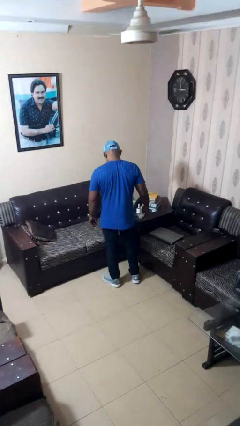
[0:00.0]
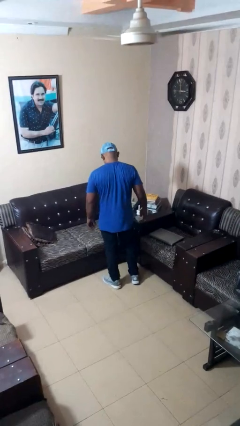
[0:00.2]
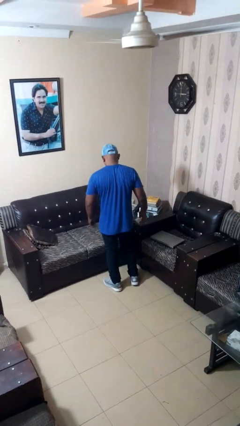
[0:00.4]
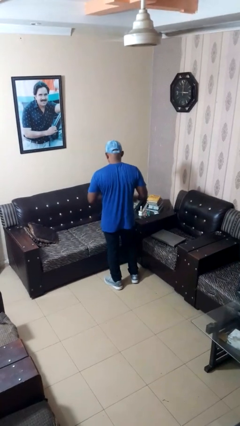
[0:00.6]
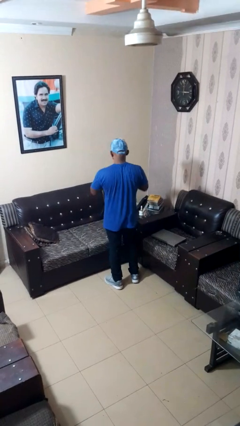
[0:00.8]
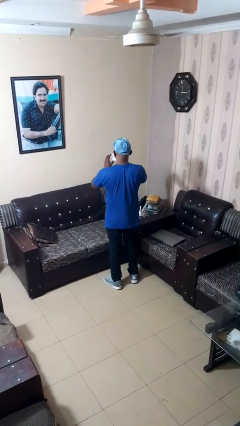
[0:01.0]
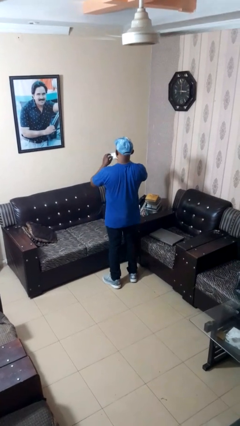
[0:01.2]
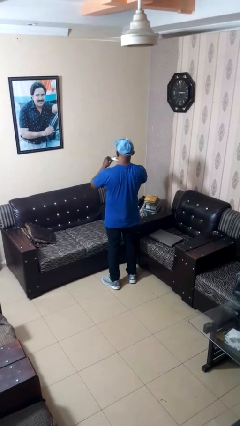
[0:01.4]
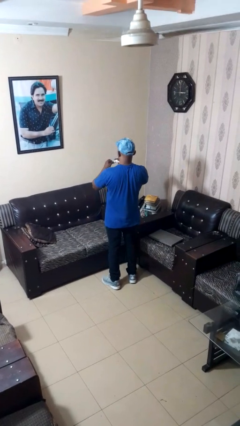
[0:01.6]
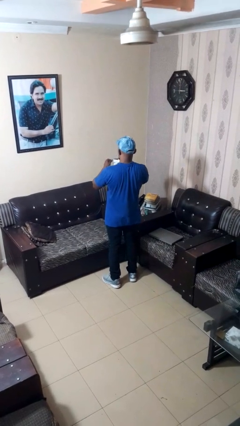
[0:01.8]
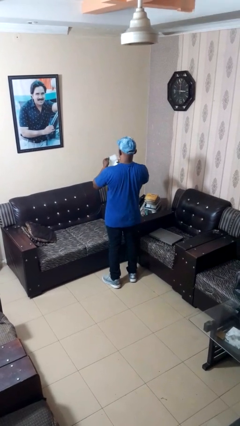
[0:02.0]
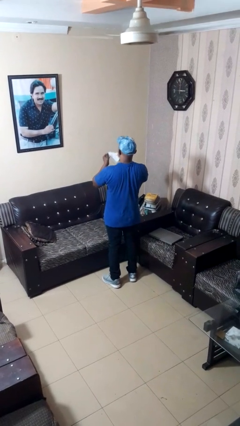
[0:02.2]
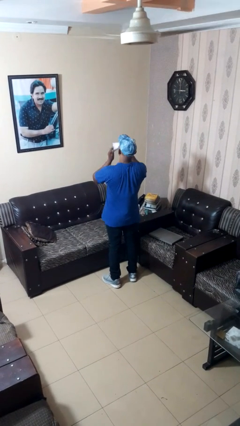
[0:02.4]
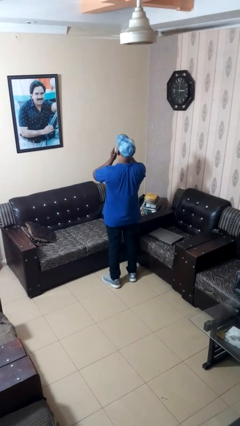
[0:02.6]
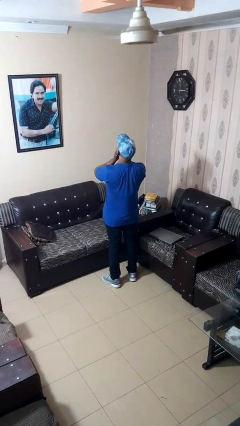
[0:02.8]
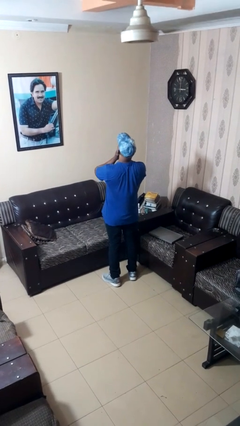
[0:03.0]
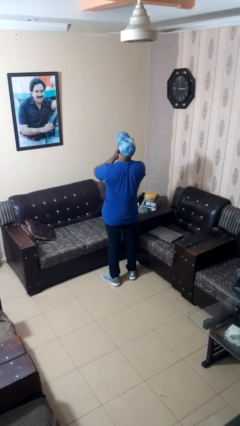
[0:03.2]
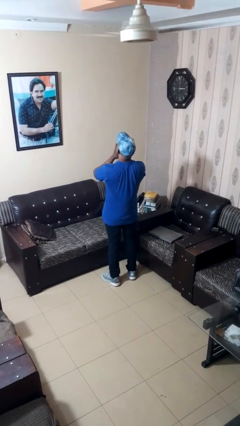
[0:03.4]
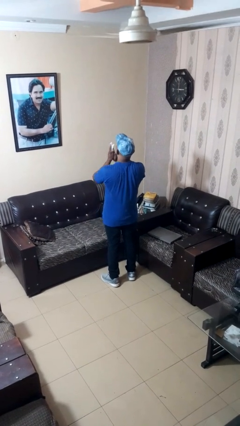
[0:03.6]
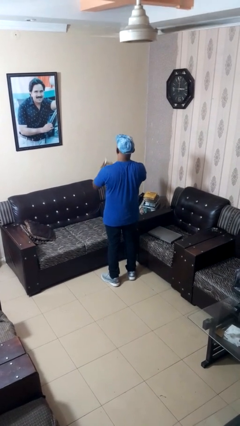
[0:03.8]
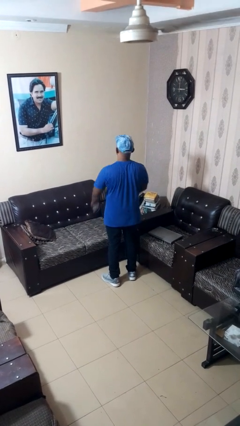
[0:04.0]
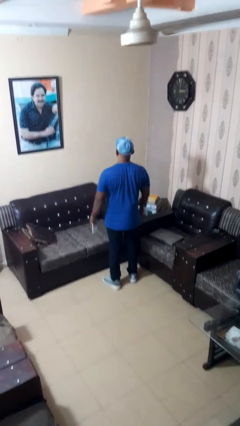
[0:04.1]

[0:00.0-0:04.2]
person wipes mouth with napkin

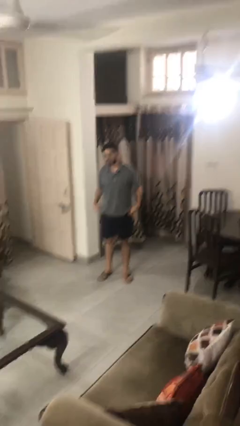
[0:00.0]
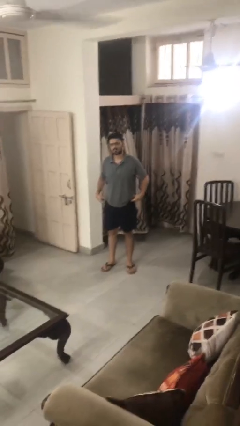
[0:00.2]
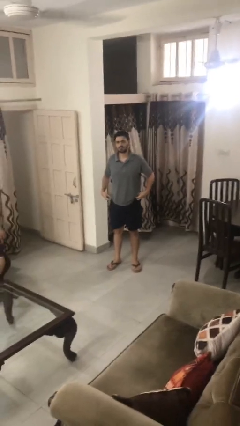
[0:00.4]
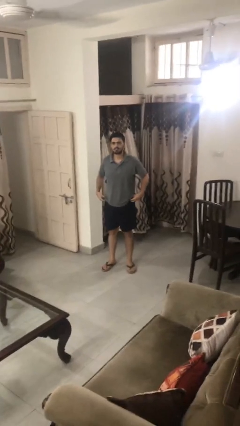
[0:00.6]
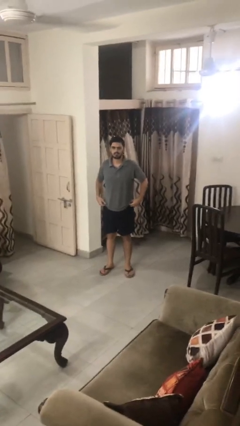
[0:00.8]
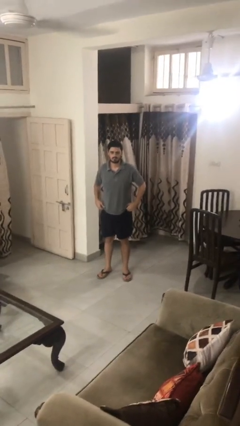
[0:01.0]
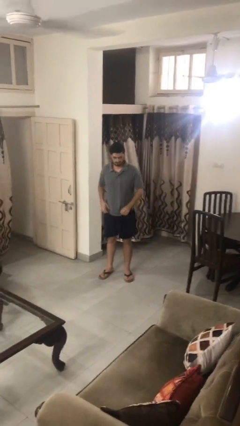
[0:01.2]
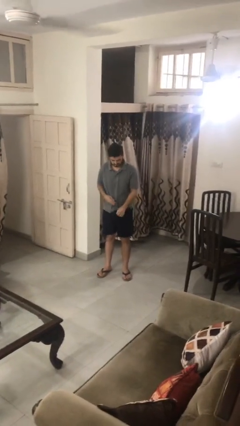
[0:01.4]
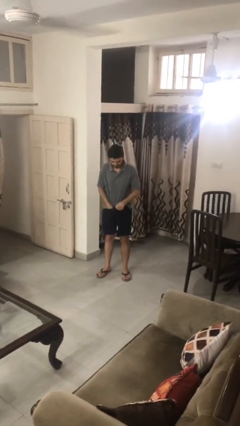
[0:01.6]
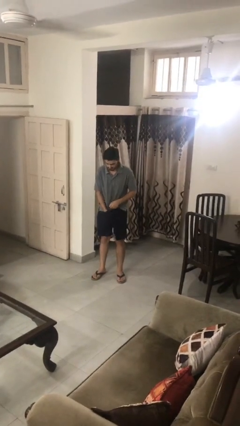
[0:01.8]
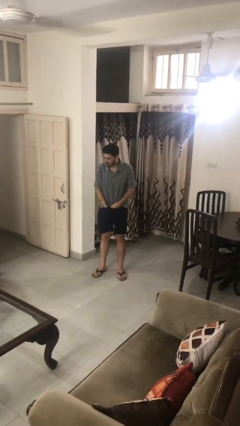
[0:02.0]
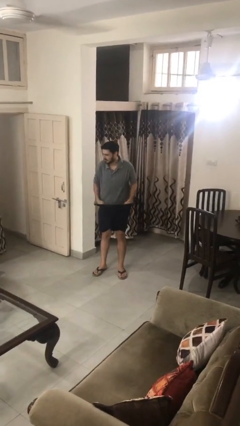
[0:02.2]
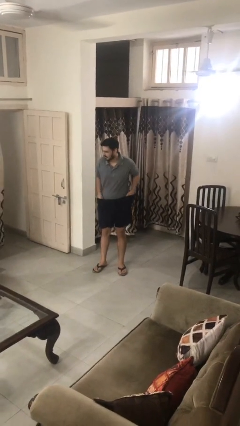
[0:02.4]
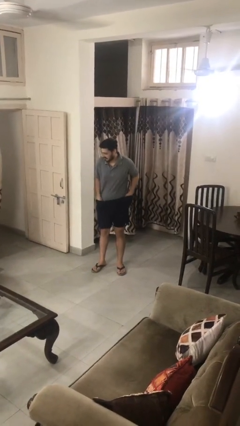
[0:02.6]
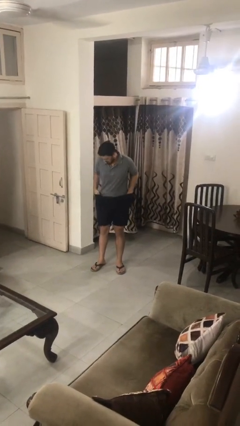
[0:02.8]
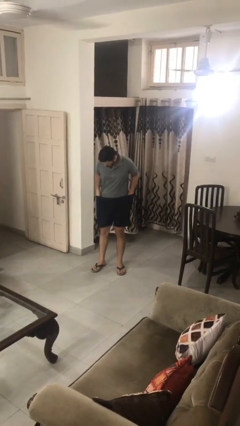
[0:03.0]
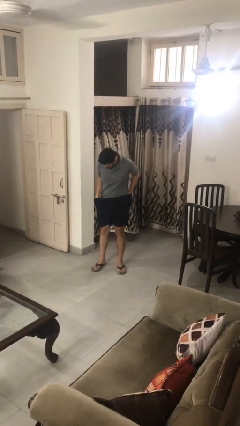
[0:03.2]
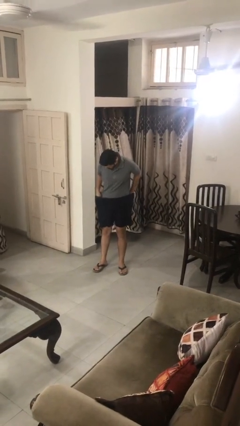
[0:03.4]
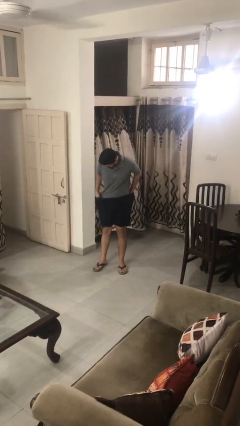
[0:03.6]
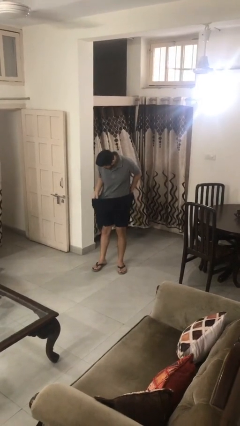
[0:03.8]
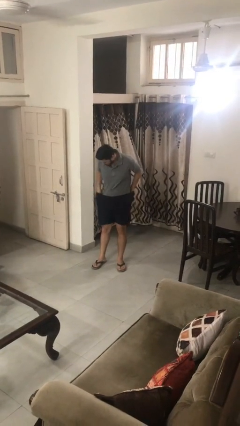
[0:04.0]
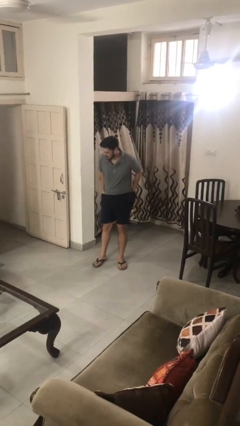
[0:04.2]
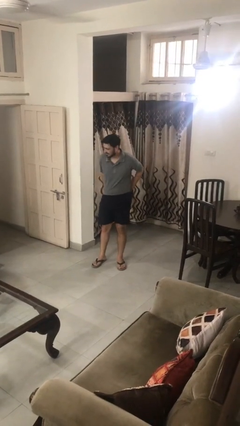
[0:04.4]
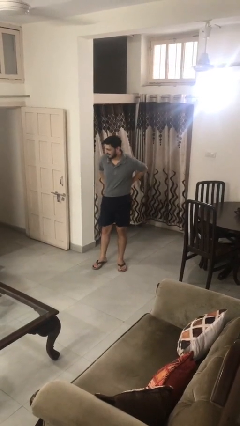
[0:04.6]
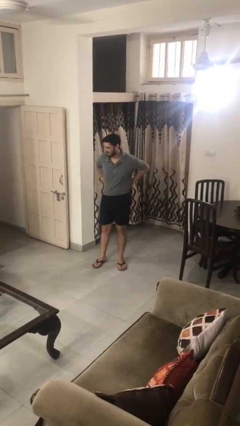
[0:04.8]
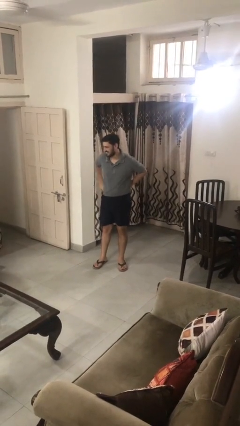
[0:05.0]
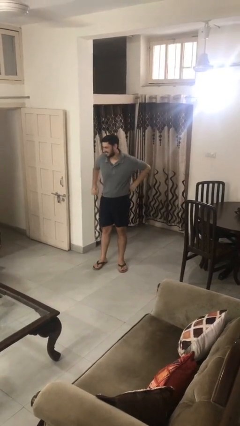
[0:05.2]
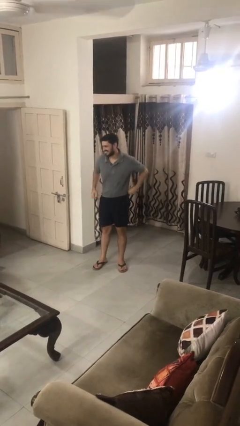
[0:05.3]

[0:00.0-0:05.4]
person tucks in shirt

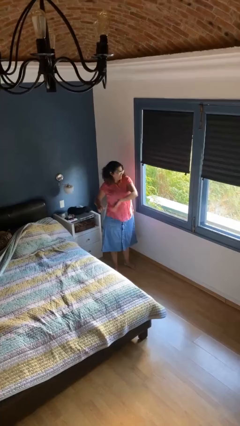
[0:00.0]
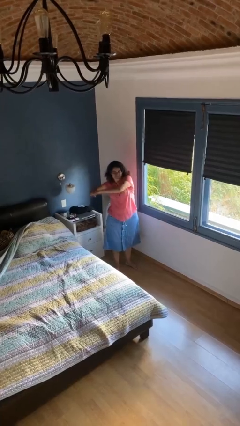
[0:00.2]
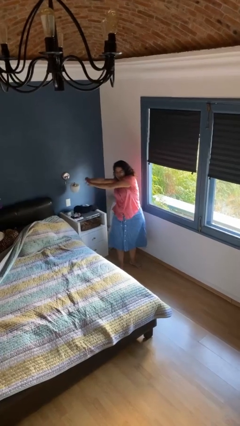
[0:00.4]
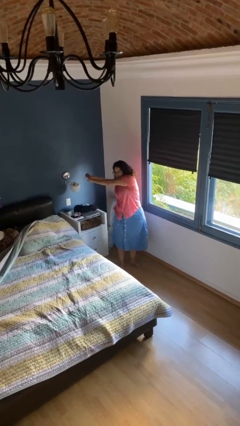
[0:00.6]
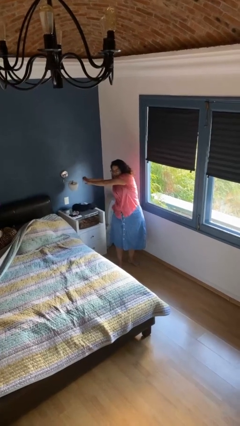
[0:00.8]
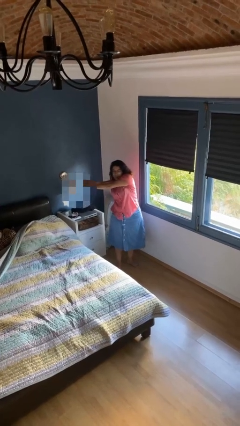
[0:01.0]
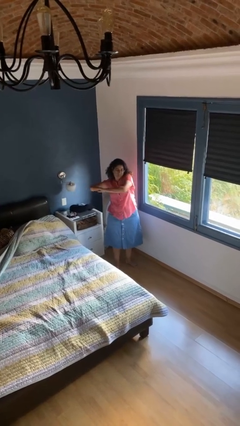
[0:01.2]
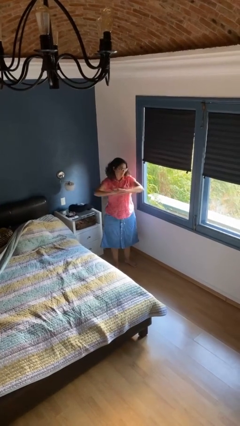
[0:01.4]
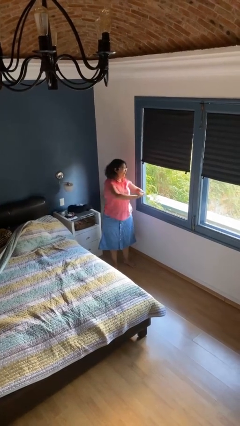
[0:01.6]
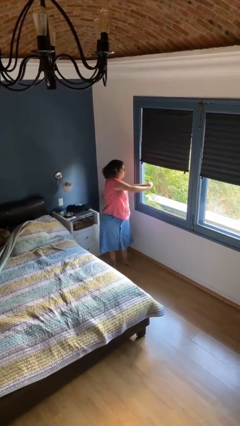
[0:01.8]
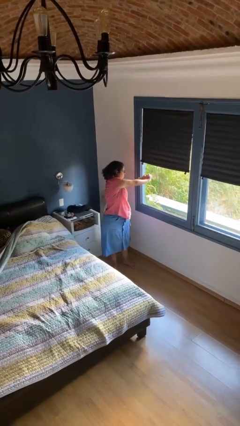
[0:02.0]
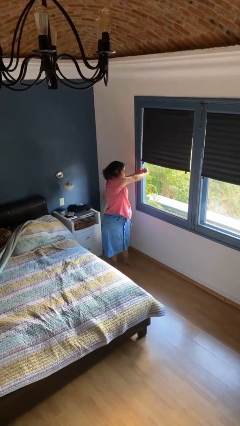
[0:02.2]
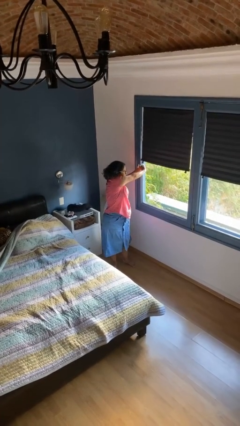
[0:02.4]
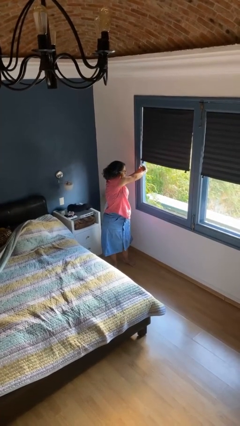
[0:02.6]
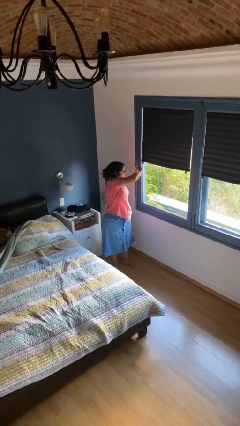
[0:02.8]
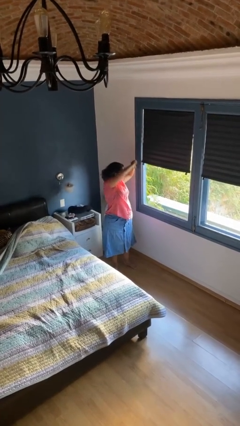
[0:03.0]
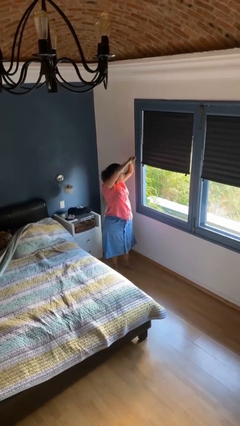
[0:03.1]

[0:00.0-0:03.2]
person stretches arms to side

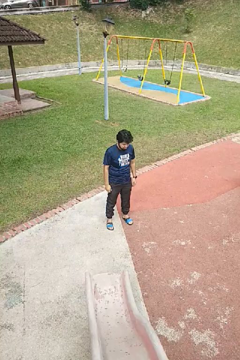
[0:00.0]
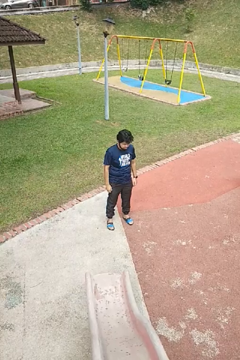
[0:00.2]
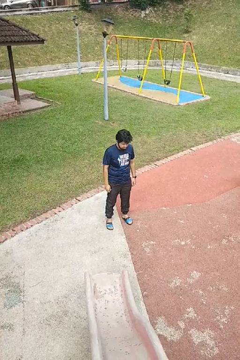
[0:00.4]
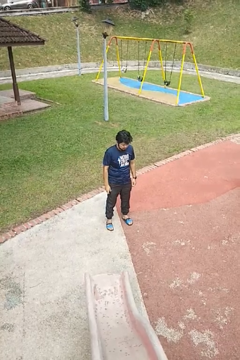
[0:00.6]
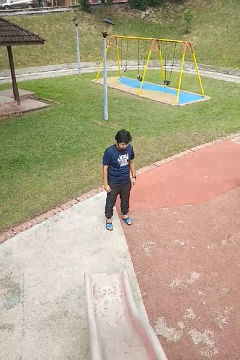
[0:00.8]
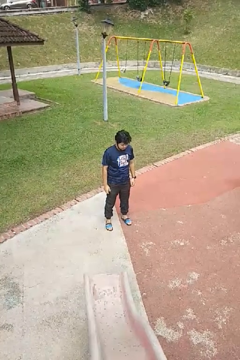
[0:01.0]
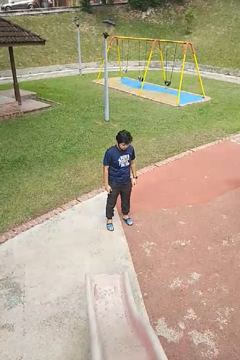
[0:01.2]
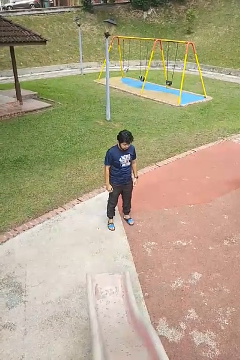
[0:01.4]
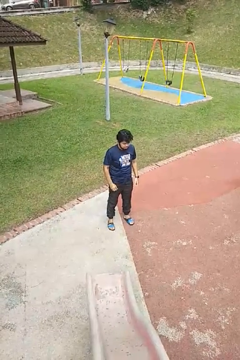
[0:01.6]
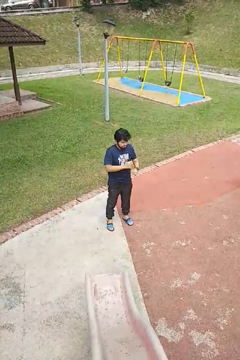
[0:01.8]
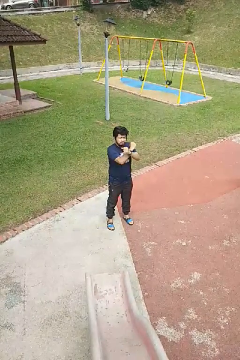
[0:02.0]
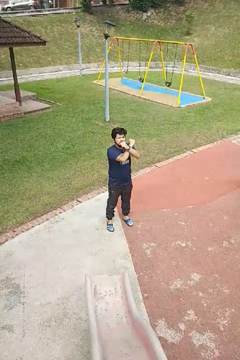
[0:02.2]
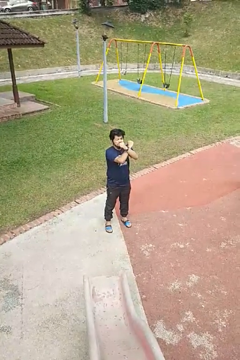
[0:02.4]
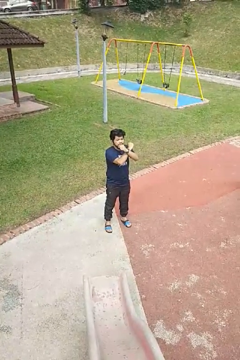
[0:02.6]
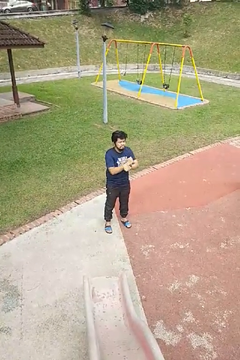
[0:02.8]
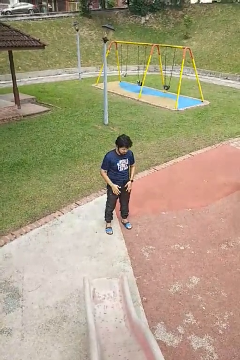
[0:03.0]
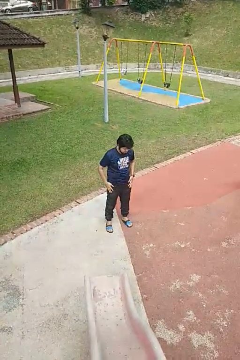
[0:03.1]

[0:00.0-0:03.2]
person gestures arms x

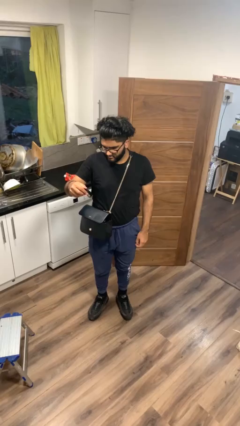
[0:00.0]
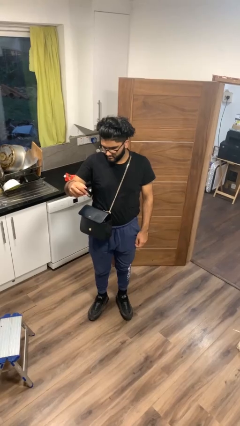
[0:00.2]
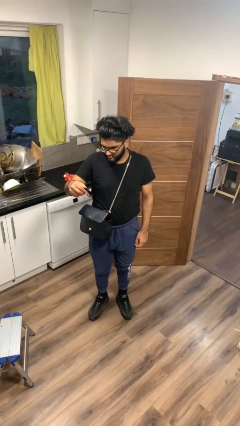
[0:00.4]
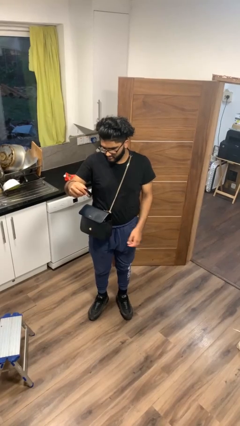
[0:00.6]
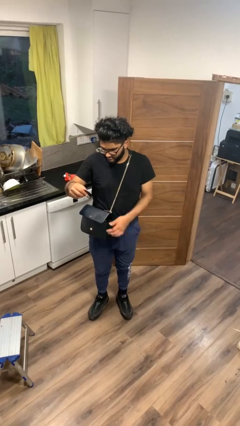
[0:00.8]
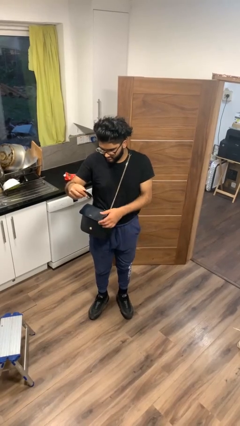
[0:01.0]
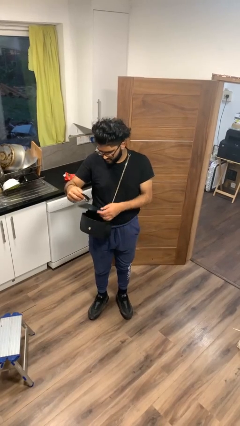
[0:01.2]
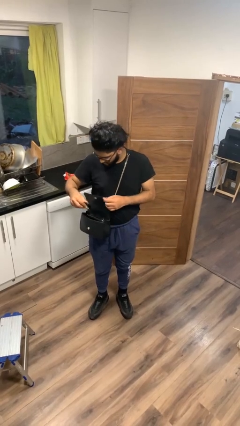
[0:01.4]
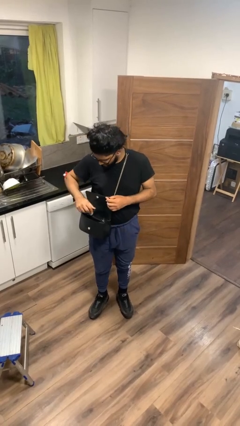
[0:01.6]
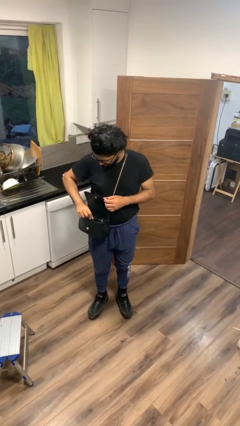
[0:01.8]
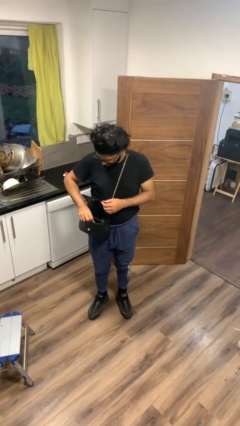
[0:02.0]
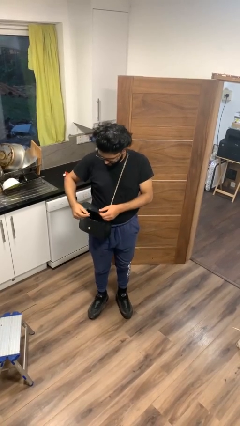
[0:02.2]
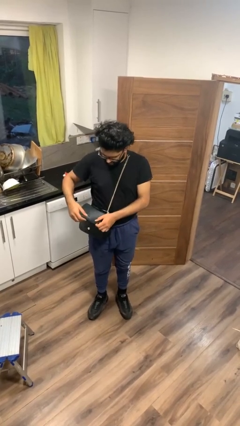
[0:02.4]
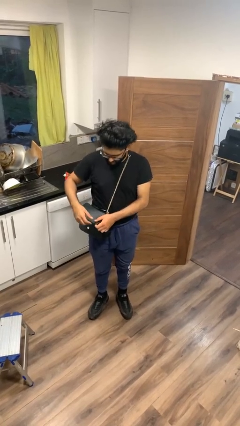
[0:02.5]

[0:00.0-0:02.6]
person puts object into purse
